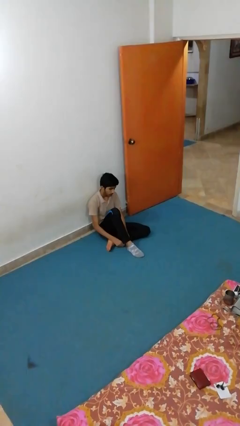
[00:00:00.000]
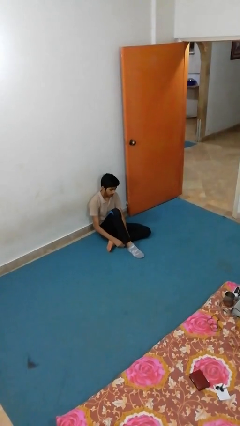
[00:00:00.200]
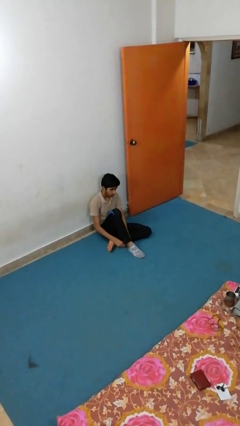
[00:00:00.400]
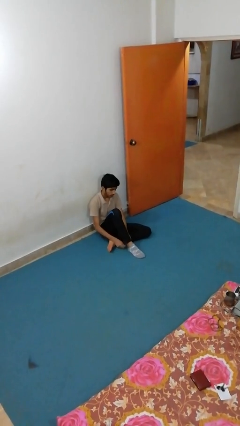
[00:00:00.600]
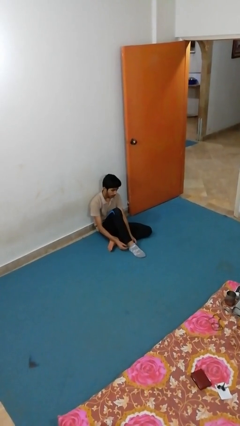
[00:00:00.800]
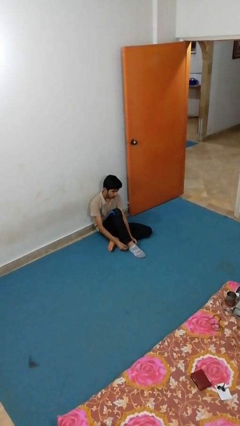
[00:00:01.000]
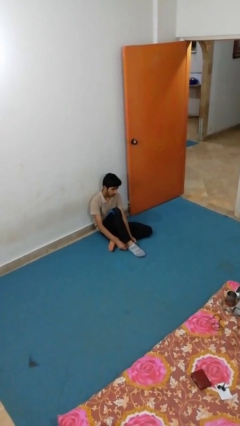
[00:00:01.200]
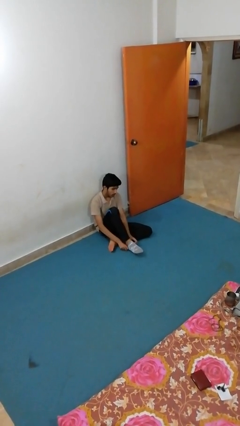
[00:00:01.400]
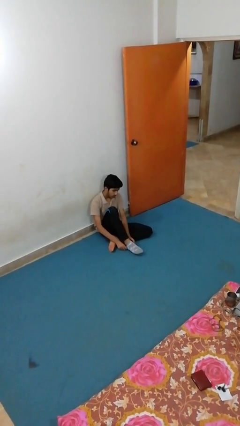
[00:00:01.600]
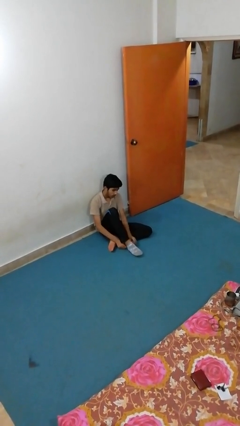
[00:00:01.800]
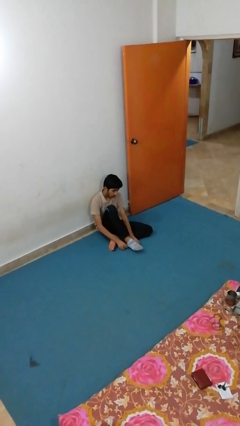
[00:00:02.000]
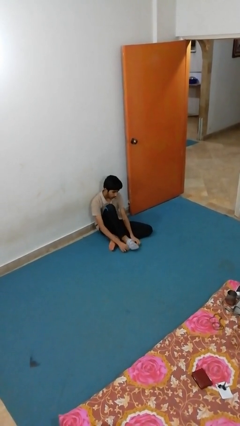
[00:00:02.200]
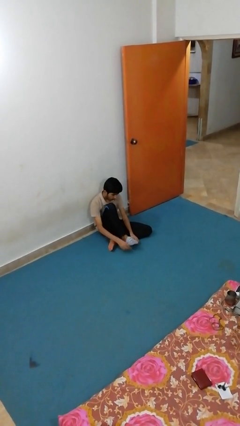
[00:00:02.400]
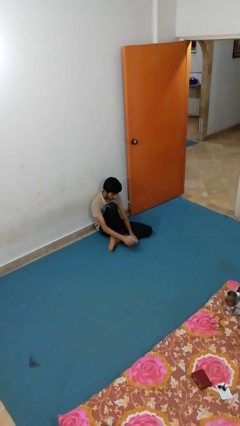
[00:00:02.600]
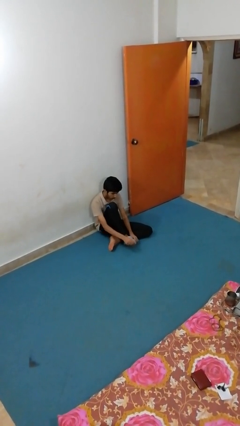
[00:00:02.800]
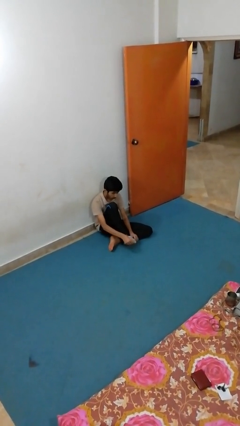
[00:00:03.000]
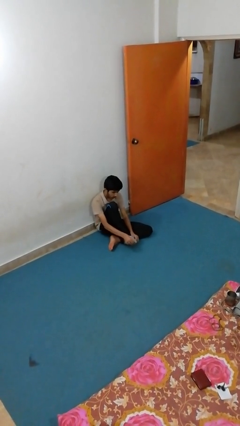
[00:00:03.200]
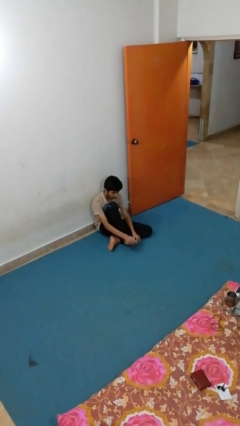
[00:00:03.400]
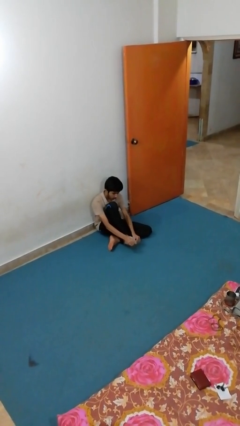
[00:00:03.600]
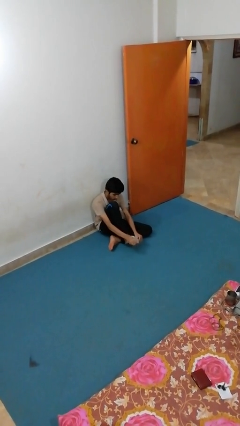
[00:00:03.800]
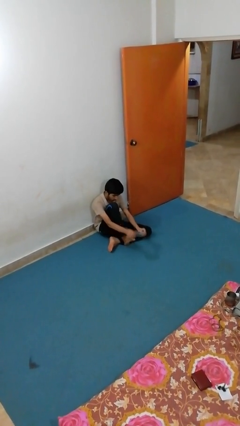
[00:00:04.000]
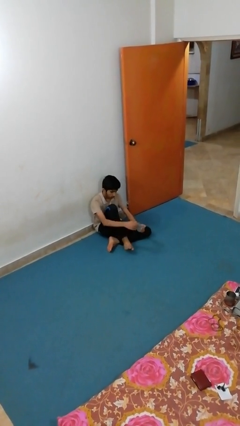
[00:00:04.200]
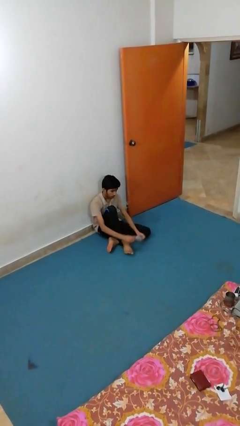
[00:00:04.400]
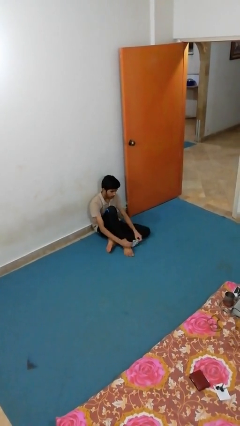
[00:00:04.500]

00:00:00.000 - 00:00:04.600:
person takes off socks

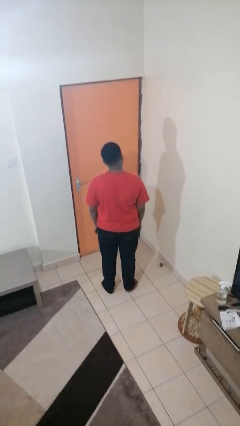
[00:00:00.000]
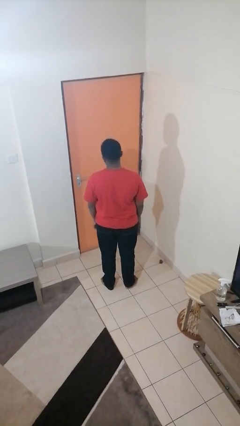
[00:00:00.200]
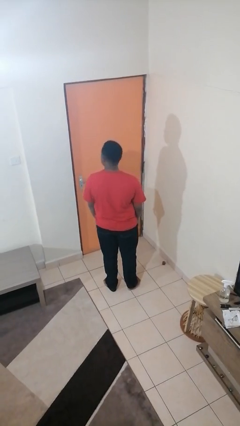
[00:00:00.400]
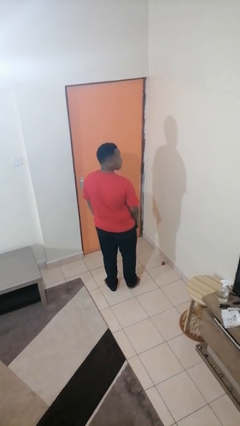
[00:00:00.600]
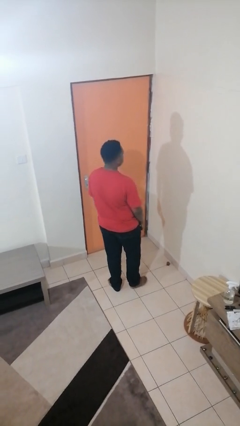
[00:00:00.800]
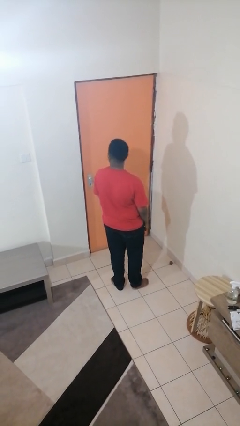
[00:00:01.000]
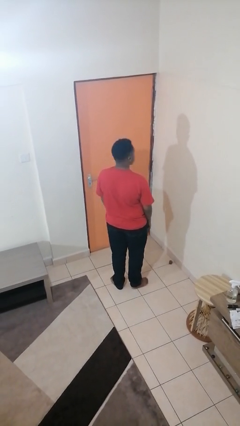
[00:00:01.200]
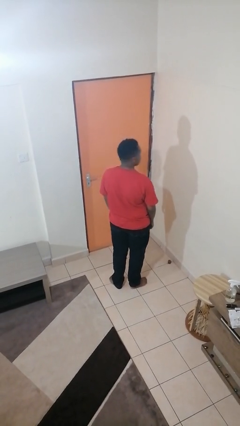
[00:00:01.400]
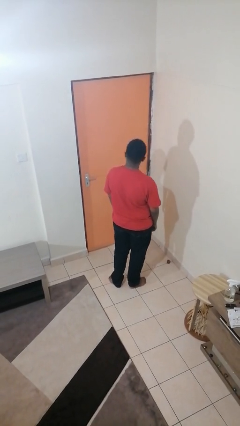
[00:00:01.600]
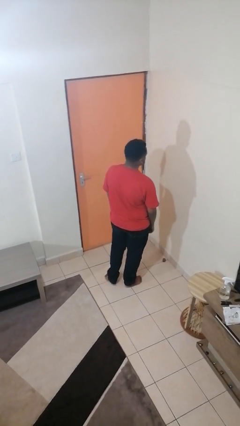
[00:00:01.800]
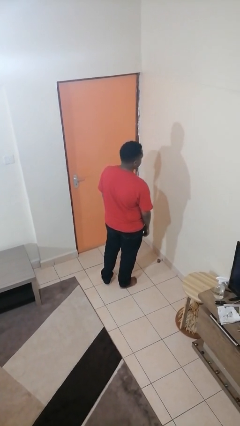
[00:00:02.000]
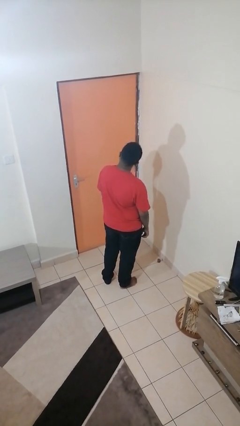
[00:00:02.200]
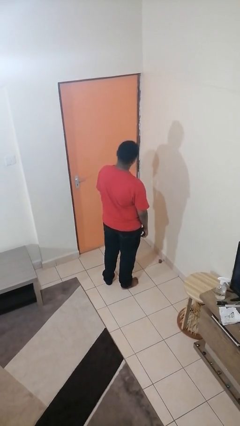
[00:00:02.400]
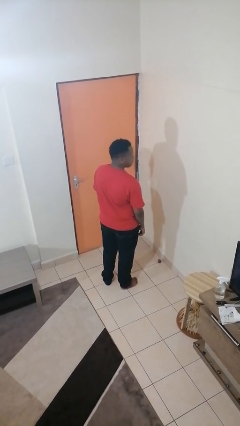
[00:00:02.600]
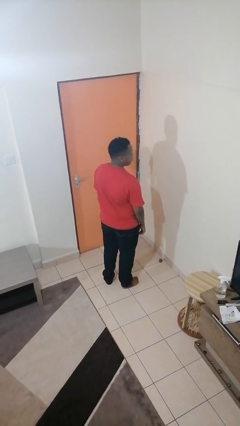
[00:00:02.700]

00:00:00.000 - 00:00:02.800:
person shakes head

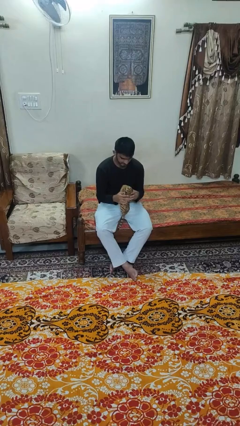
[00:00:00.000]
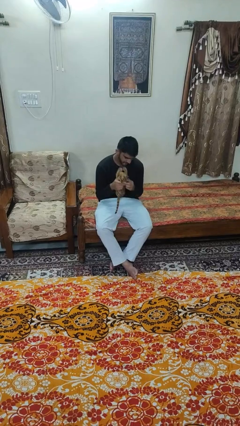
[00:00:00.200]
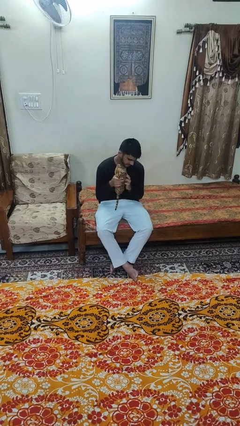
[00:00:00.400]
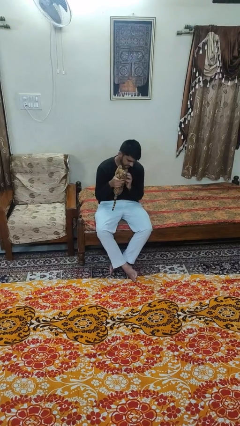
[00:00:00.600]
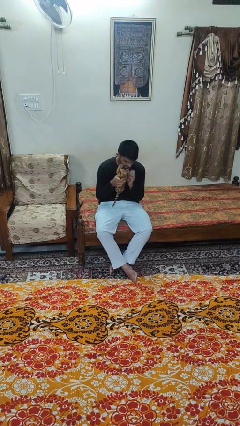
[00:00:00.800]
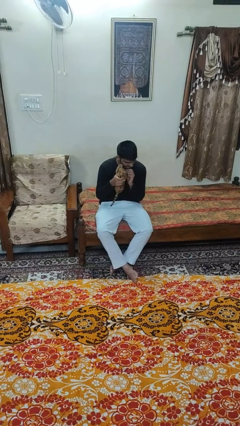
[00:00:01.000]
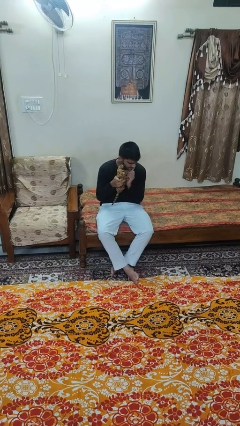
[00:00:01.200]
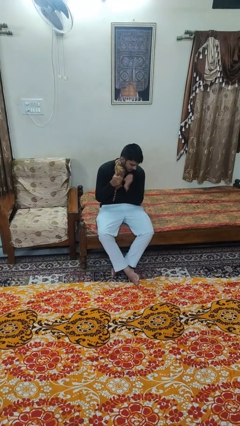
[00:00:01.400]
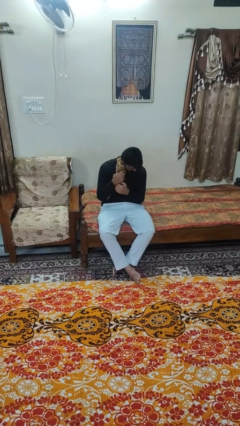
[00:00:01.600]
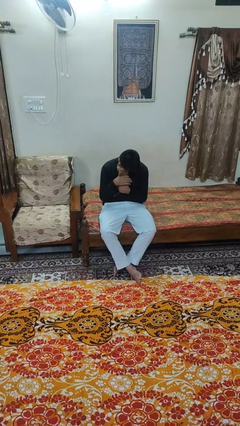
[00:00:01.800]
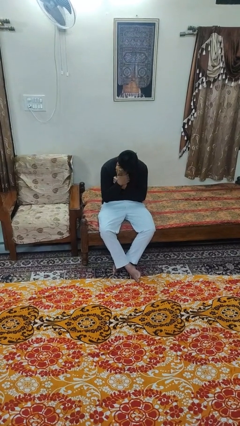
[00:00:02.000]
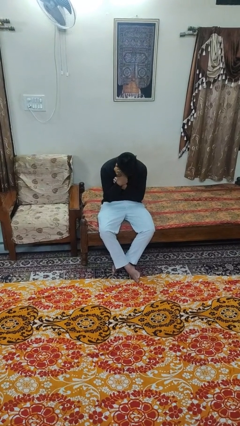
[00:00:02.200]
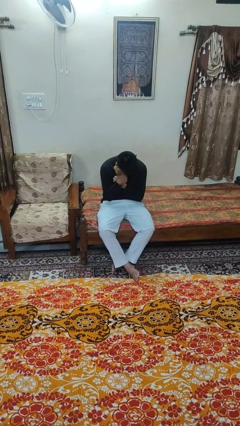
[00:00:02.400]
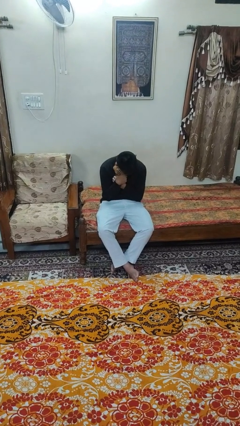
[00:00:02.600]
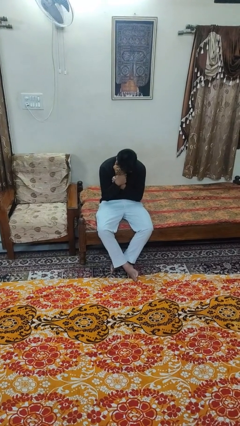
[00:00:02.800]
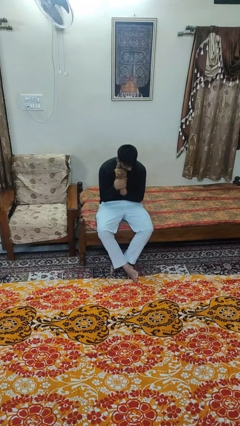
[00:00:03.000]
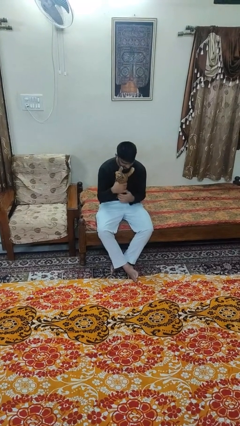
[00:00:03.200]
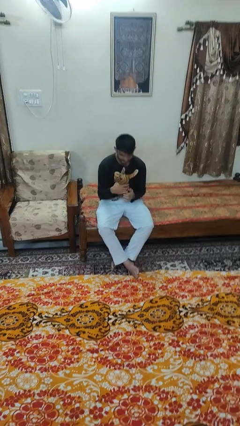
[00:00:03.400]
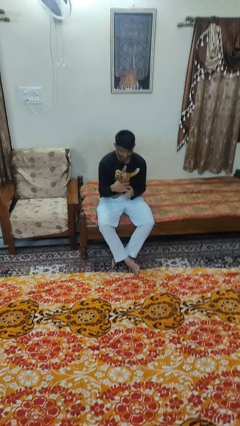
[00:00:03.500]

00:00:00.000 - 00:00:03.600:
person hugs stuffed animal

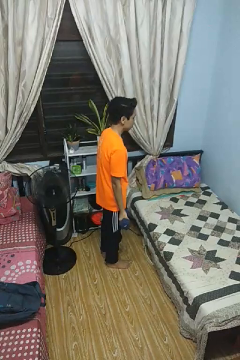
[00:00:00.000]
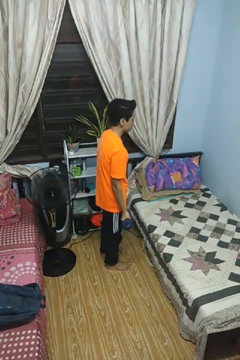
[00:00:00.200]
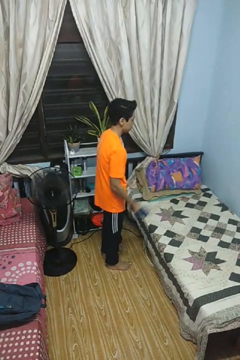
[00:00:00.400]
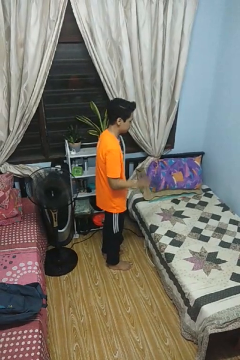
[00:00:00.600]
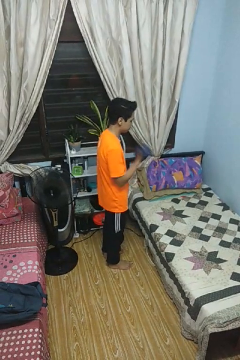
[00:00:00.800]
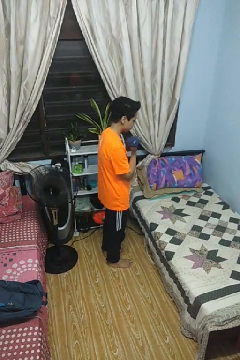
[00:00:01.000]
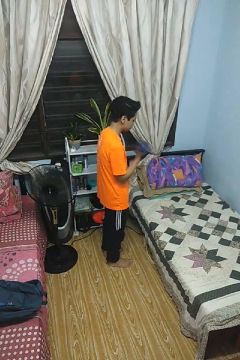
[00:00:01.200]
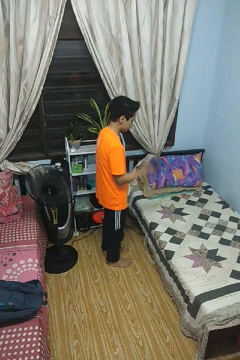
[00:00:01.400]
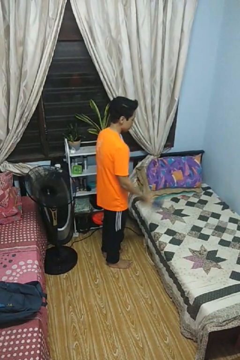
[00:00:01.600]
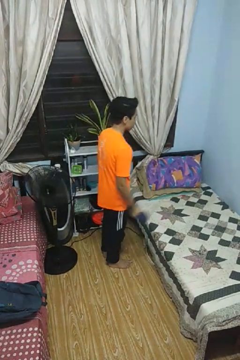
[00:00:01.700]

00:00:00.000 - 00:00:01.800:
person lifts dumbbells

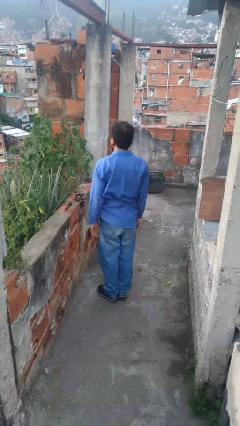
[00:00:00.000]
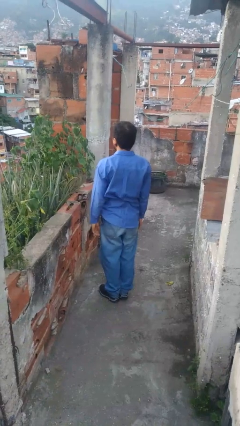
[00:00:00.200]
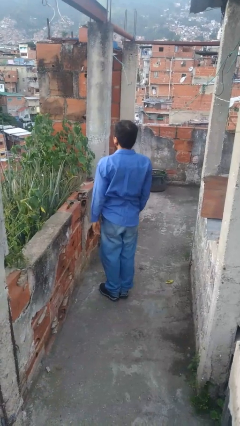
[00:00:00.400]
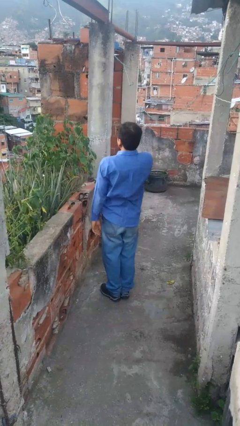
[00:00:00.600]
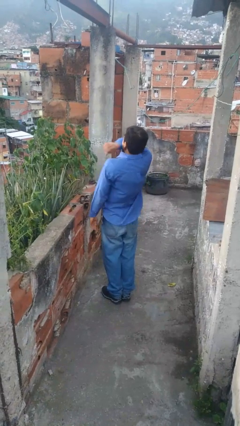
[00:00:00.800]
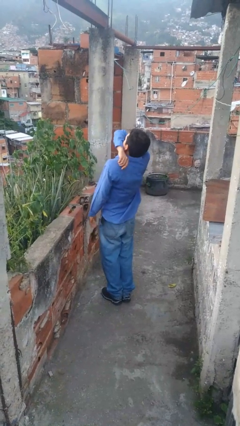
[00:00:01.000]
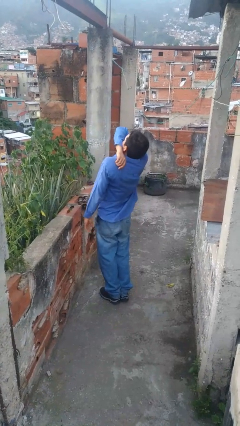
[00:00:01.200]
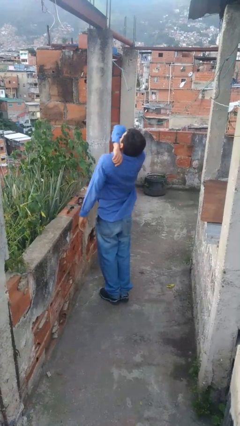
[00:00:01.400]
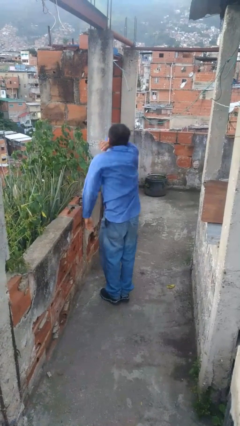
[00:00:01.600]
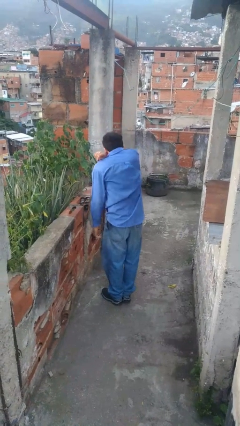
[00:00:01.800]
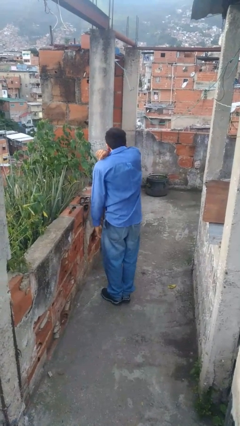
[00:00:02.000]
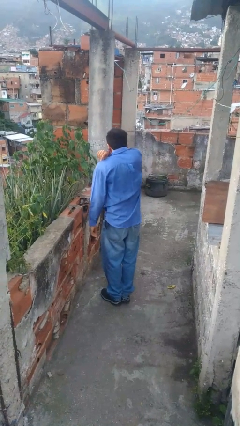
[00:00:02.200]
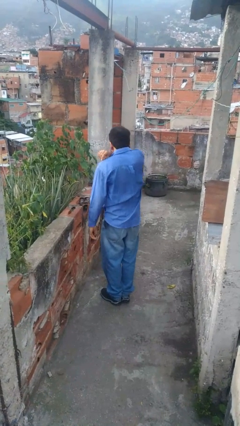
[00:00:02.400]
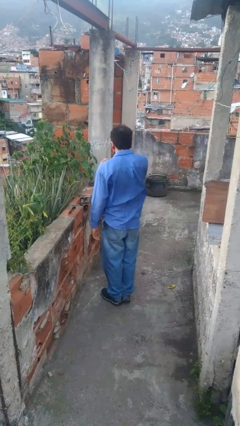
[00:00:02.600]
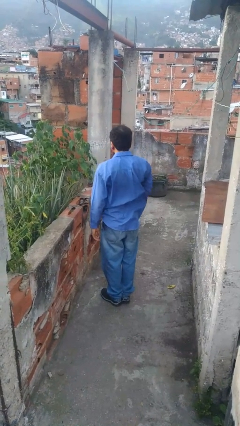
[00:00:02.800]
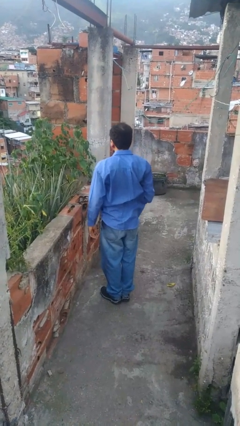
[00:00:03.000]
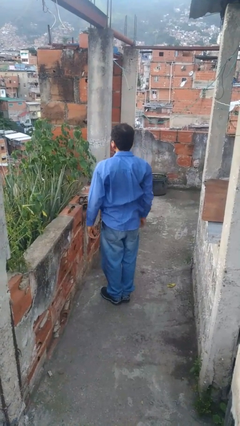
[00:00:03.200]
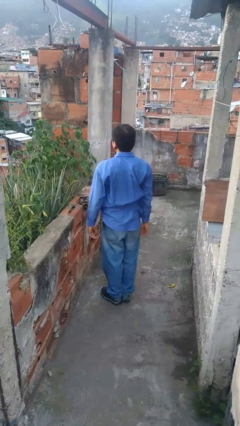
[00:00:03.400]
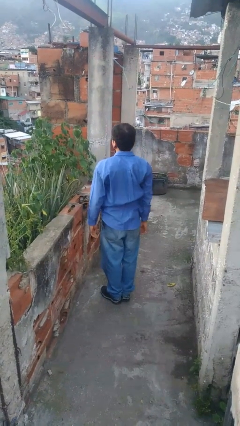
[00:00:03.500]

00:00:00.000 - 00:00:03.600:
person sneezes into arm

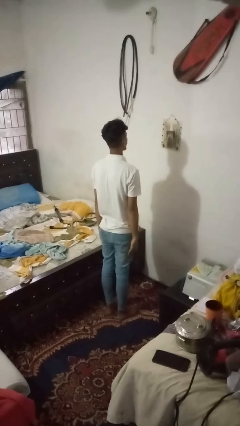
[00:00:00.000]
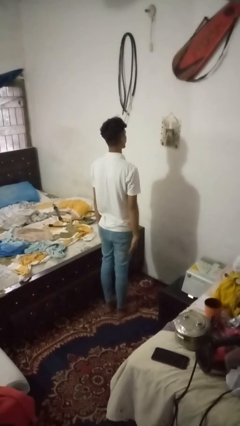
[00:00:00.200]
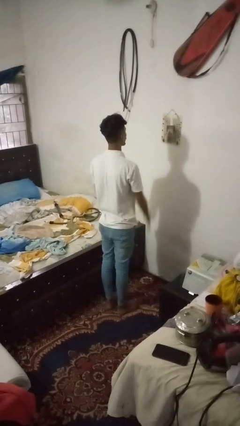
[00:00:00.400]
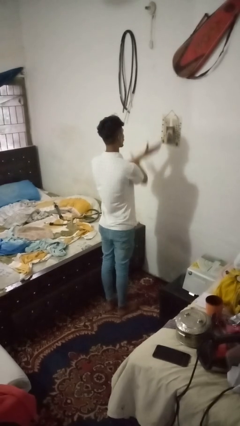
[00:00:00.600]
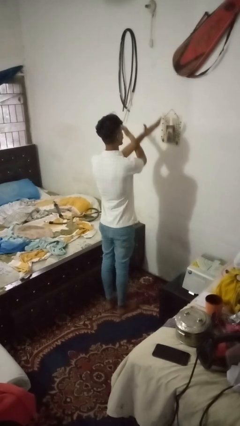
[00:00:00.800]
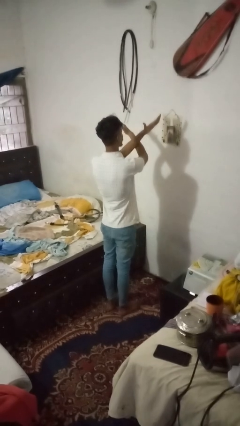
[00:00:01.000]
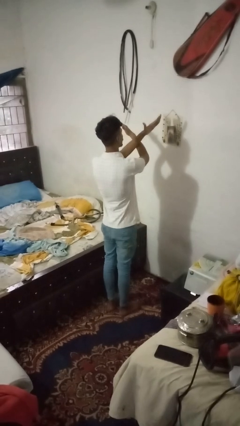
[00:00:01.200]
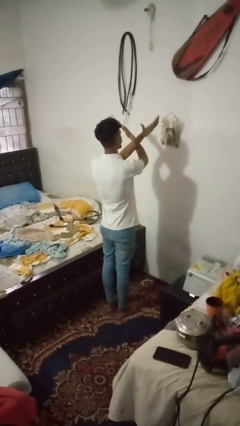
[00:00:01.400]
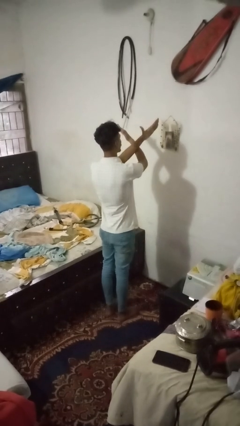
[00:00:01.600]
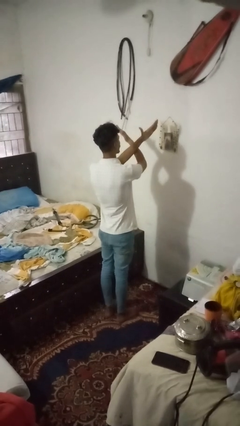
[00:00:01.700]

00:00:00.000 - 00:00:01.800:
person gestures arms x
